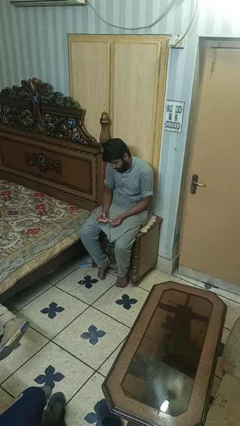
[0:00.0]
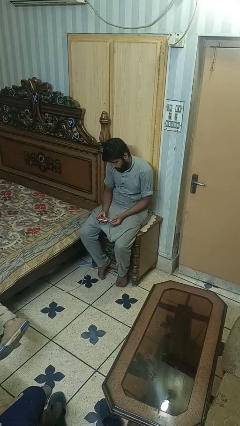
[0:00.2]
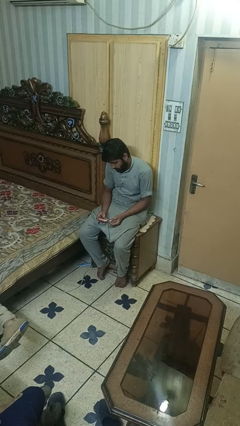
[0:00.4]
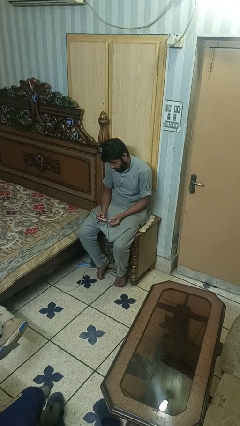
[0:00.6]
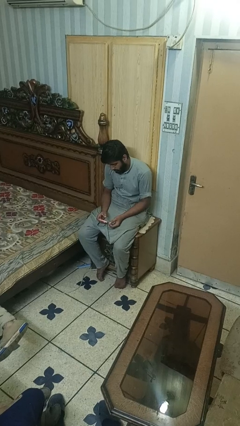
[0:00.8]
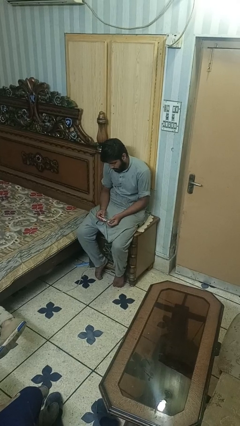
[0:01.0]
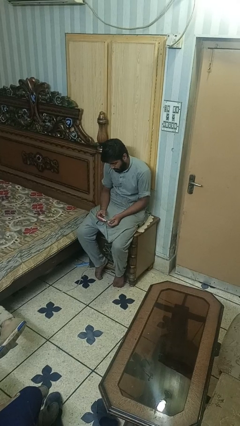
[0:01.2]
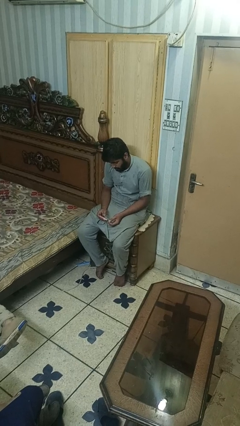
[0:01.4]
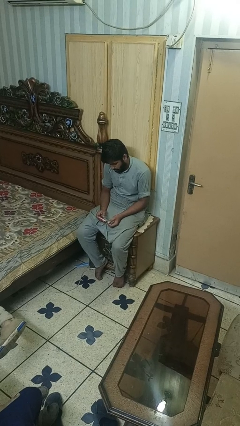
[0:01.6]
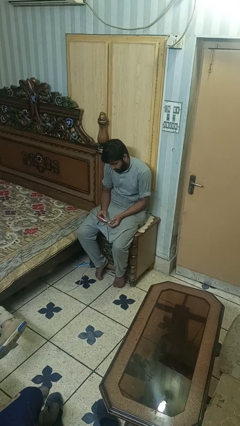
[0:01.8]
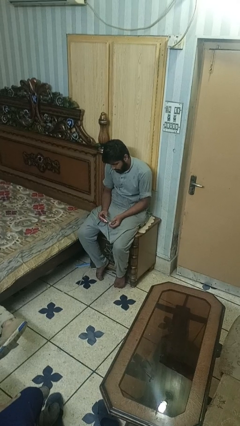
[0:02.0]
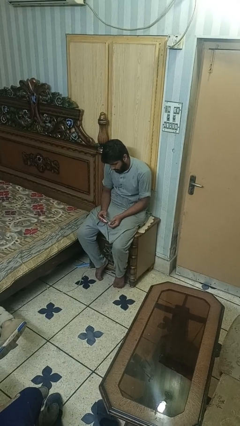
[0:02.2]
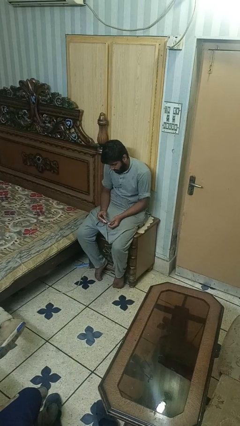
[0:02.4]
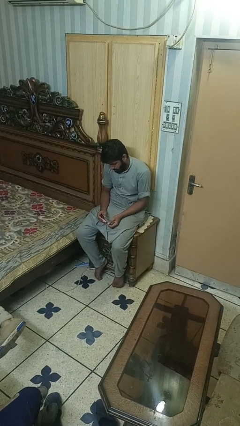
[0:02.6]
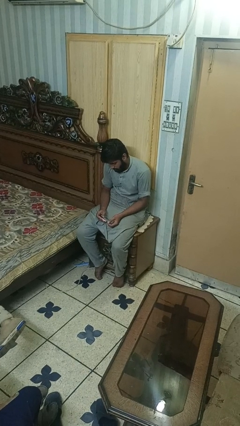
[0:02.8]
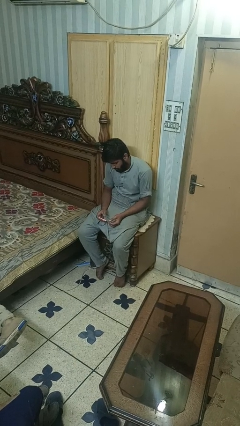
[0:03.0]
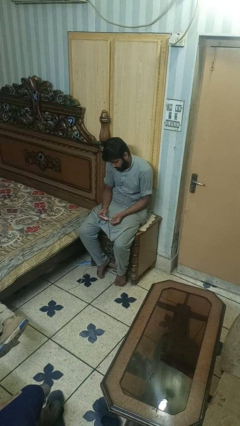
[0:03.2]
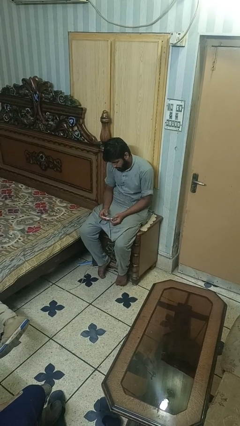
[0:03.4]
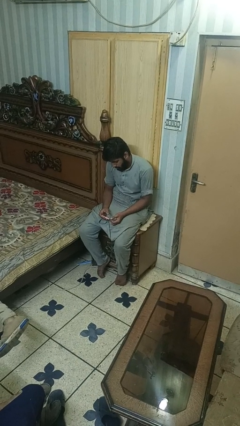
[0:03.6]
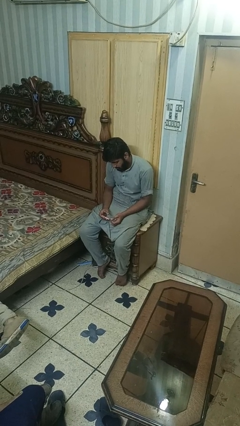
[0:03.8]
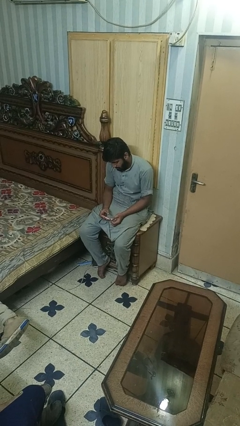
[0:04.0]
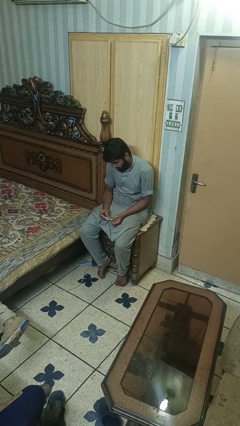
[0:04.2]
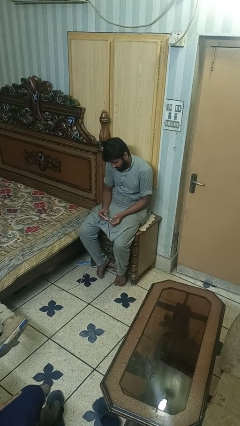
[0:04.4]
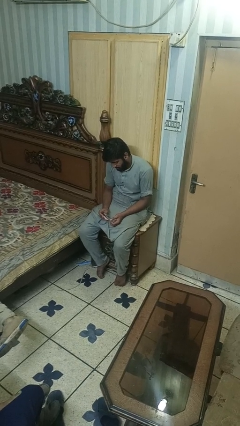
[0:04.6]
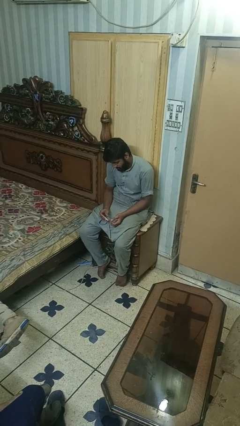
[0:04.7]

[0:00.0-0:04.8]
person clips fingernails

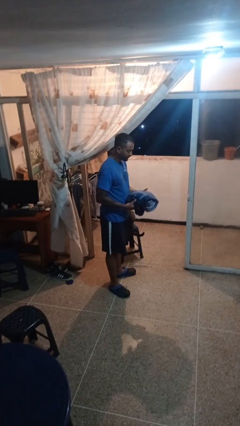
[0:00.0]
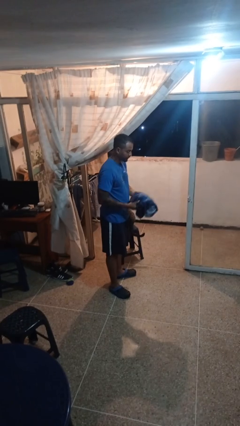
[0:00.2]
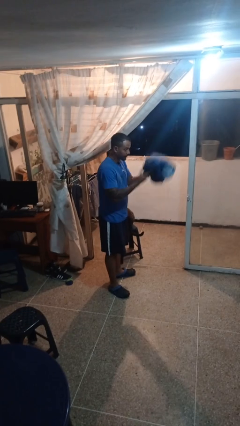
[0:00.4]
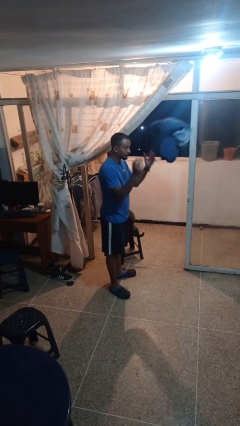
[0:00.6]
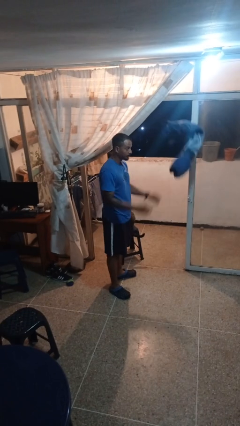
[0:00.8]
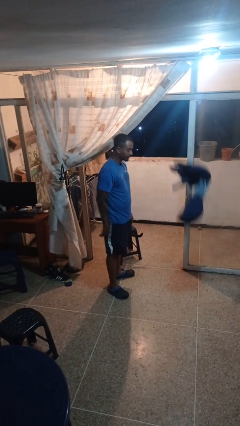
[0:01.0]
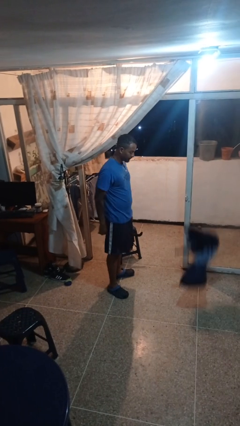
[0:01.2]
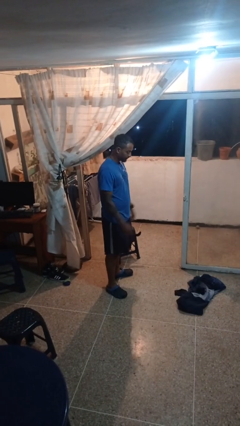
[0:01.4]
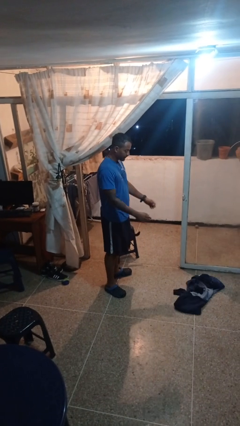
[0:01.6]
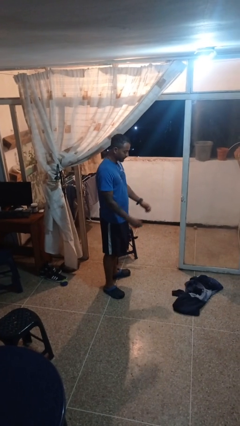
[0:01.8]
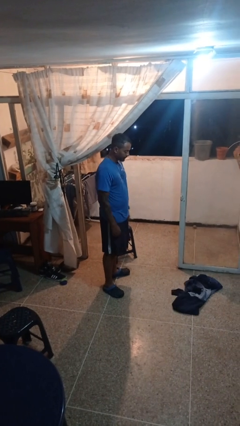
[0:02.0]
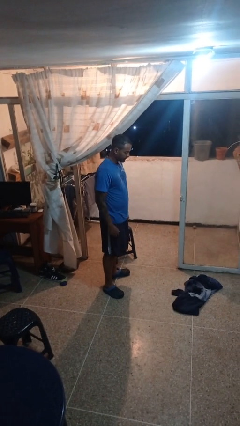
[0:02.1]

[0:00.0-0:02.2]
person throws object into air

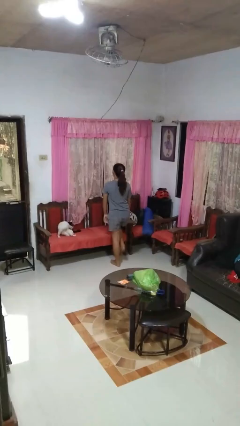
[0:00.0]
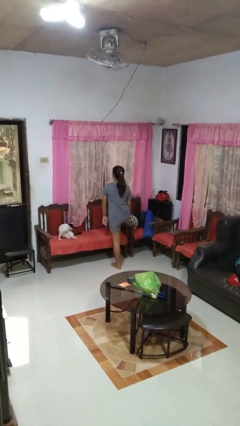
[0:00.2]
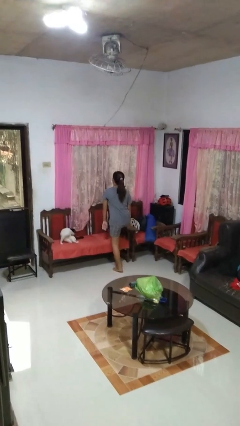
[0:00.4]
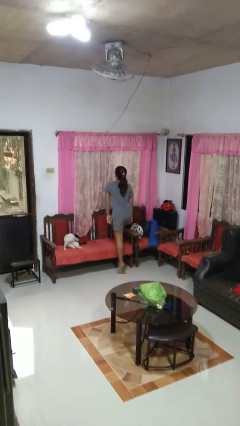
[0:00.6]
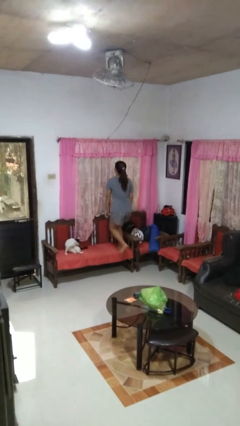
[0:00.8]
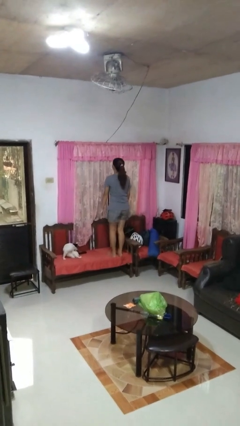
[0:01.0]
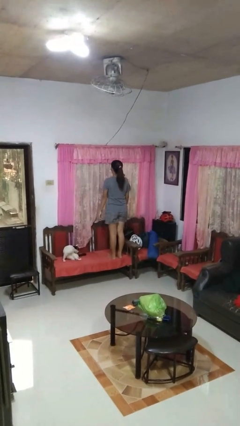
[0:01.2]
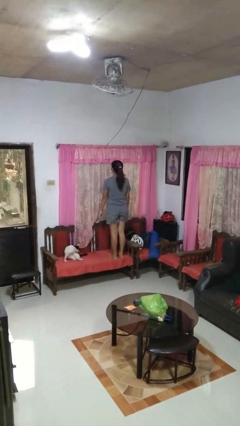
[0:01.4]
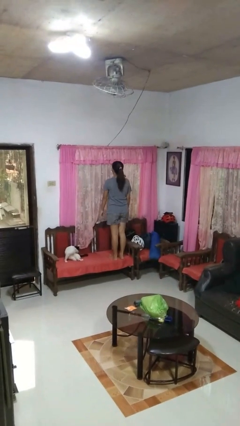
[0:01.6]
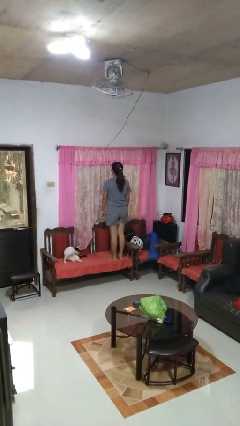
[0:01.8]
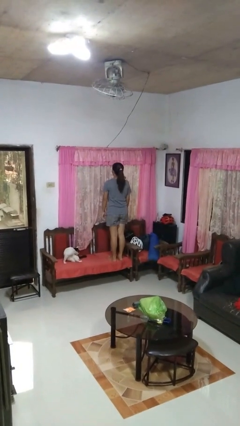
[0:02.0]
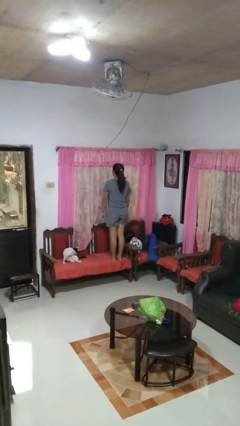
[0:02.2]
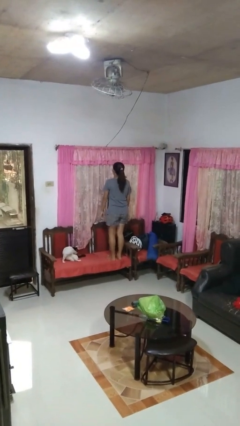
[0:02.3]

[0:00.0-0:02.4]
person climbs on chair

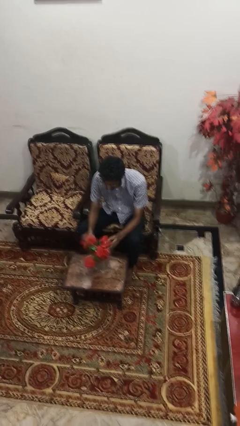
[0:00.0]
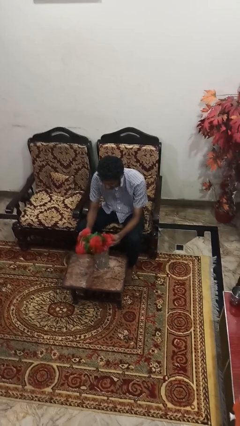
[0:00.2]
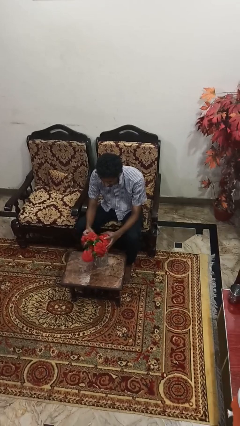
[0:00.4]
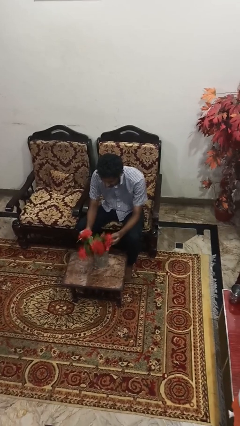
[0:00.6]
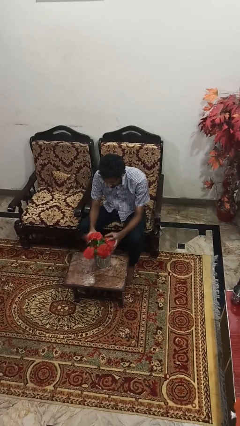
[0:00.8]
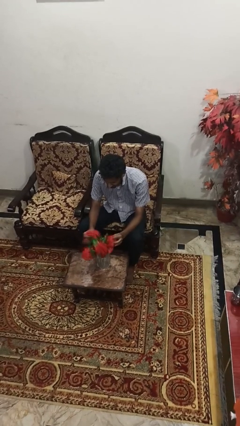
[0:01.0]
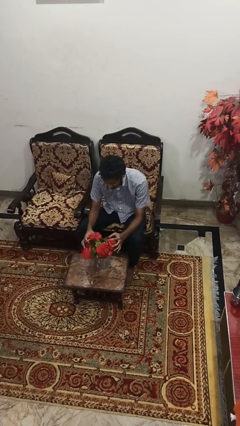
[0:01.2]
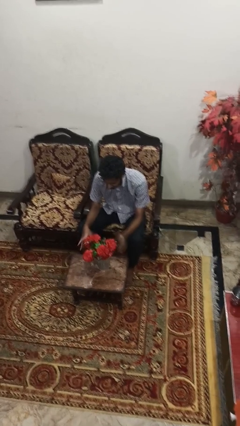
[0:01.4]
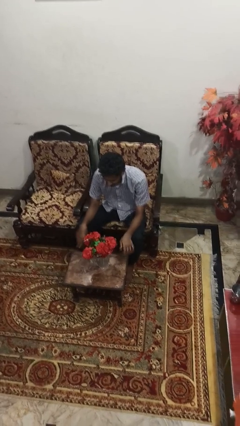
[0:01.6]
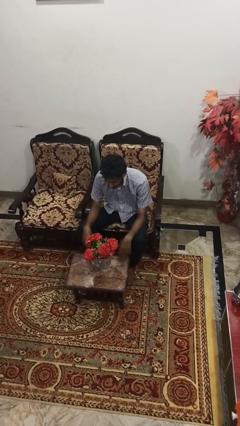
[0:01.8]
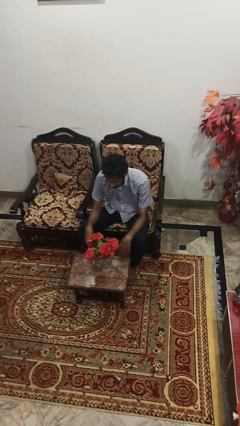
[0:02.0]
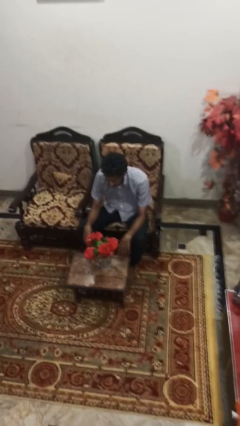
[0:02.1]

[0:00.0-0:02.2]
person arranges flowers in vase

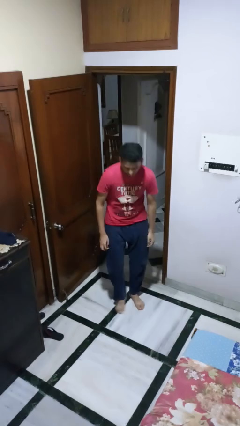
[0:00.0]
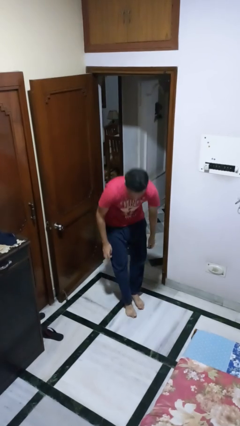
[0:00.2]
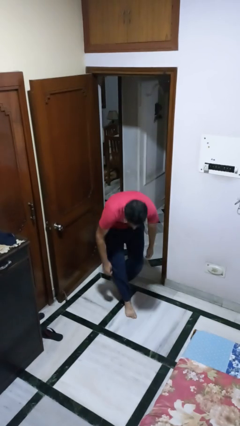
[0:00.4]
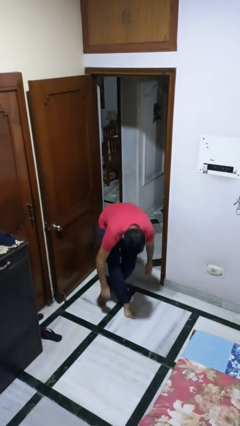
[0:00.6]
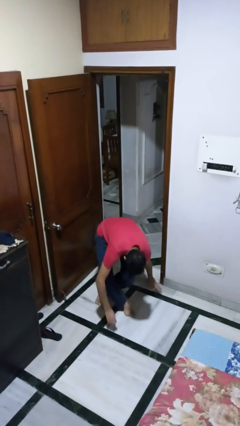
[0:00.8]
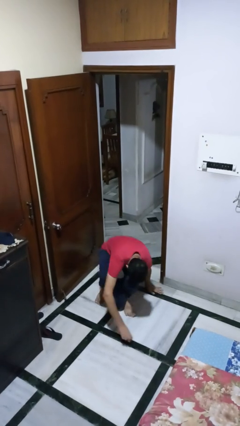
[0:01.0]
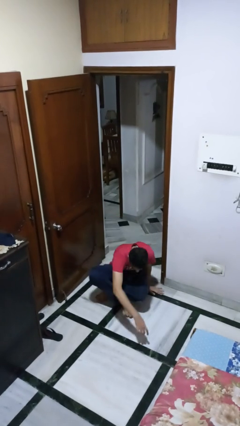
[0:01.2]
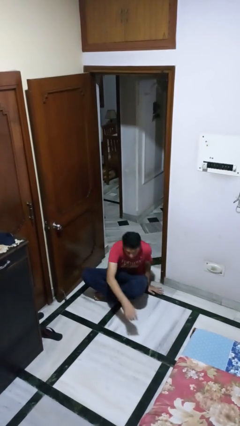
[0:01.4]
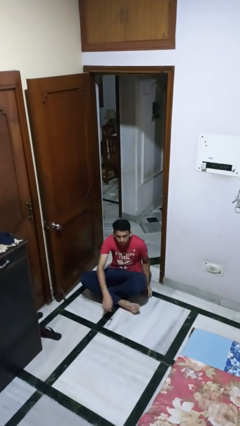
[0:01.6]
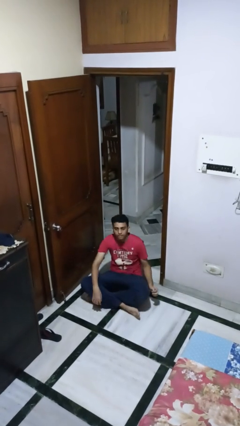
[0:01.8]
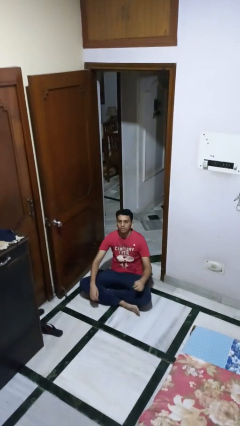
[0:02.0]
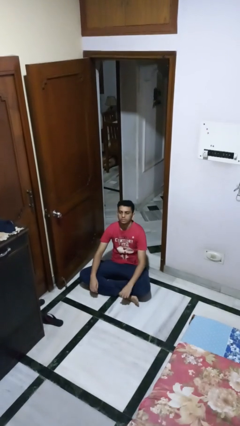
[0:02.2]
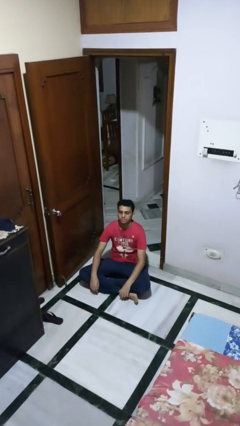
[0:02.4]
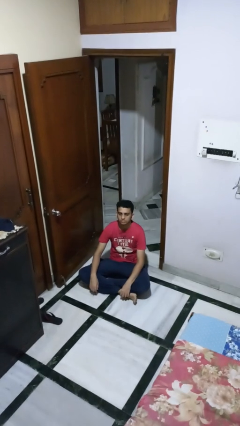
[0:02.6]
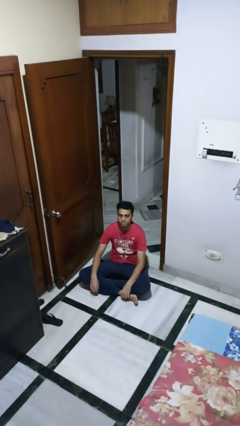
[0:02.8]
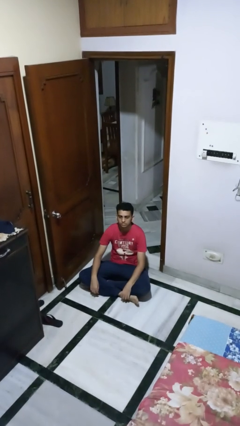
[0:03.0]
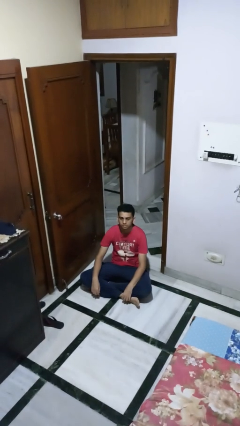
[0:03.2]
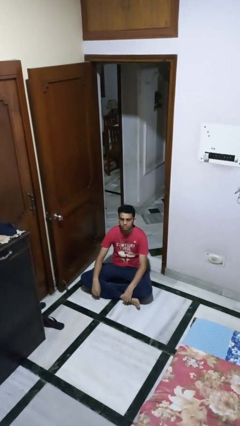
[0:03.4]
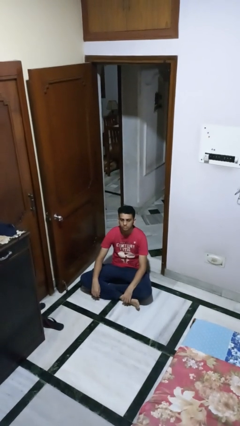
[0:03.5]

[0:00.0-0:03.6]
person sits crisscross

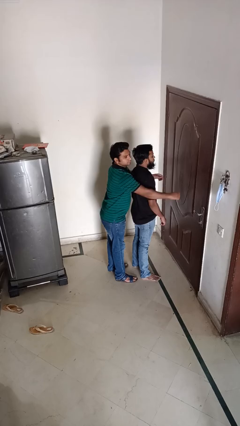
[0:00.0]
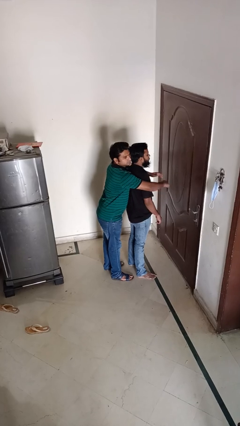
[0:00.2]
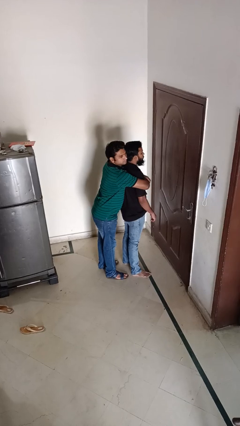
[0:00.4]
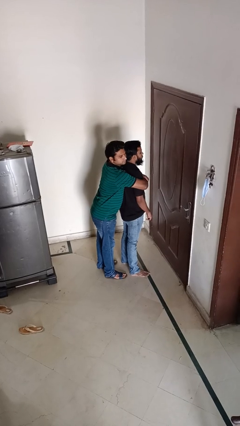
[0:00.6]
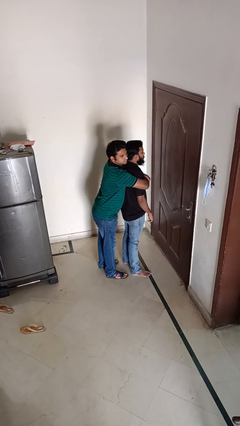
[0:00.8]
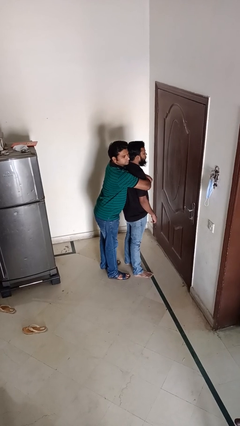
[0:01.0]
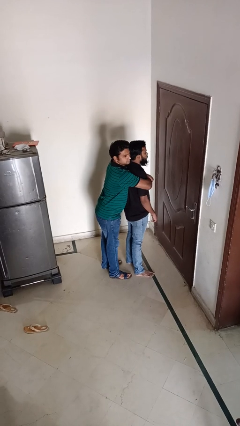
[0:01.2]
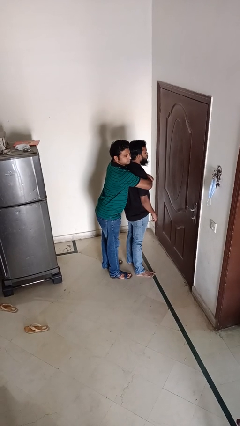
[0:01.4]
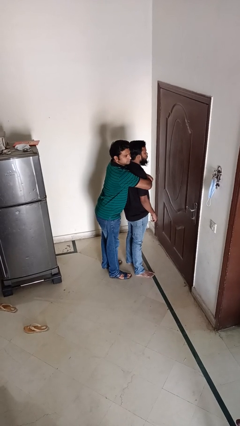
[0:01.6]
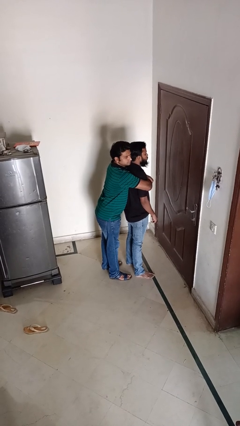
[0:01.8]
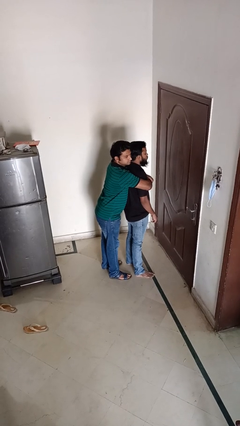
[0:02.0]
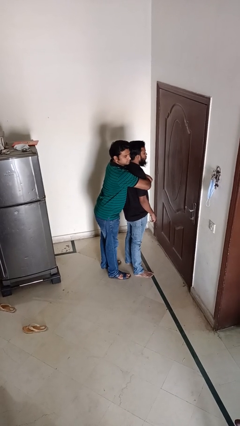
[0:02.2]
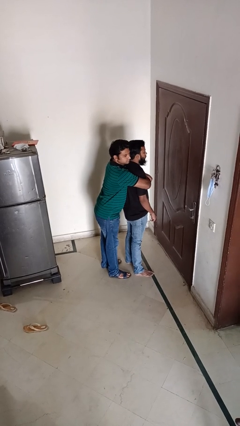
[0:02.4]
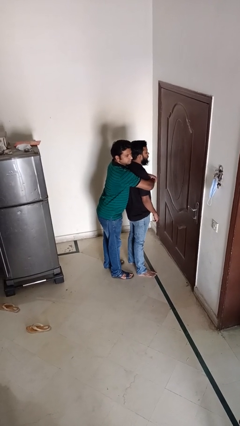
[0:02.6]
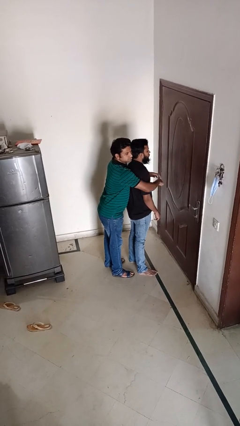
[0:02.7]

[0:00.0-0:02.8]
person hugs person from behind
